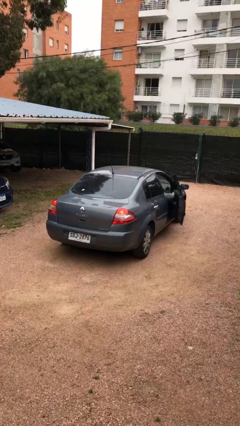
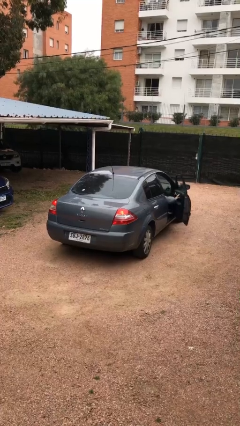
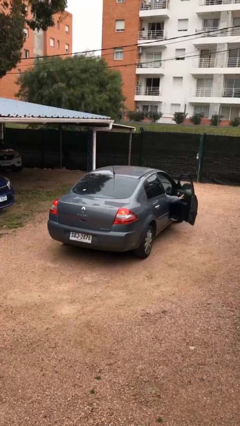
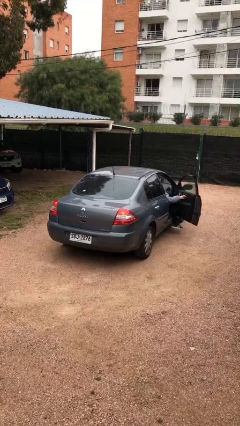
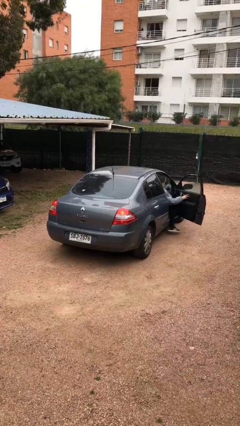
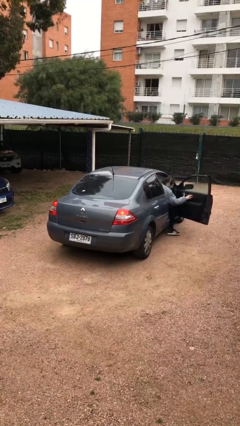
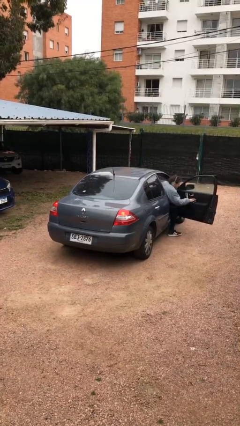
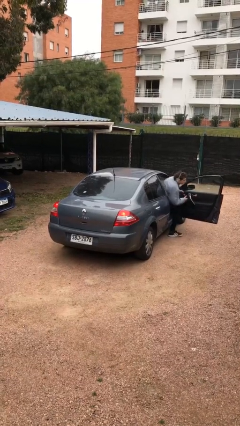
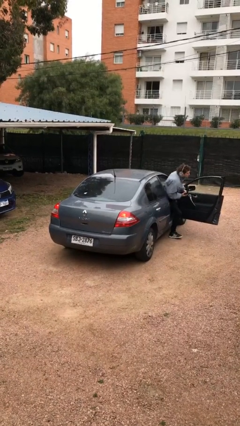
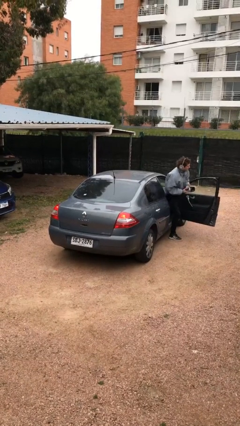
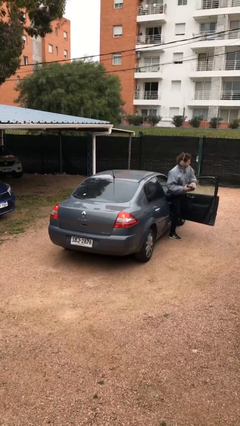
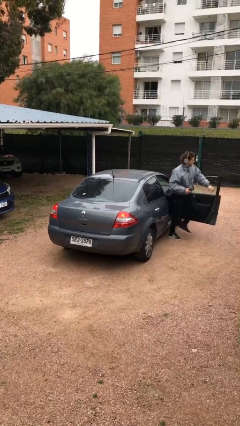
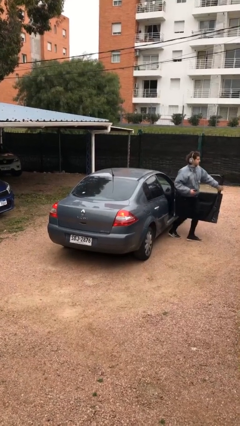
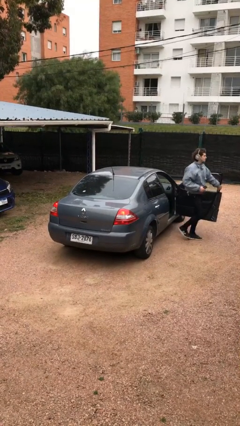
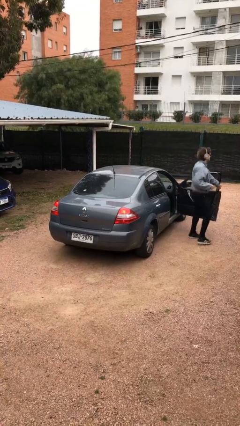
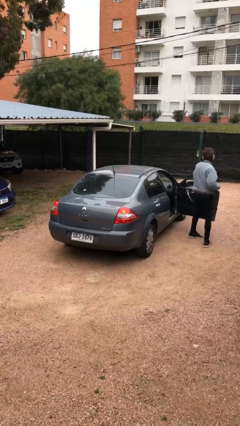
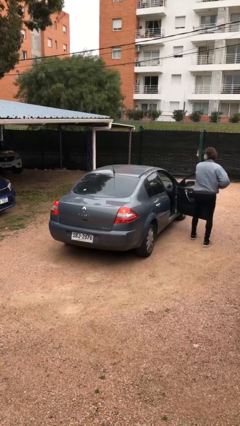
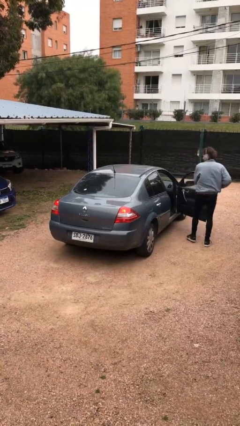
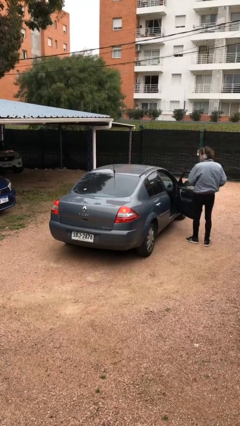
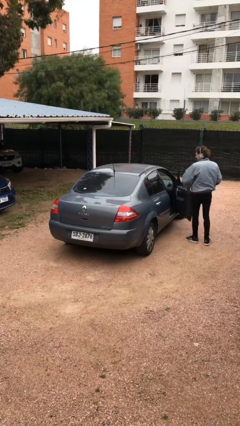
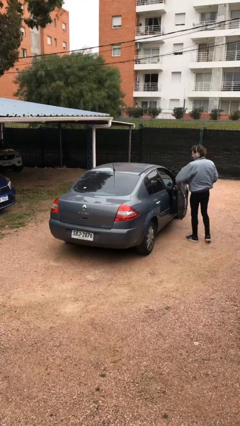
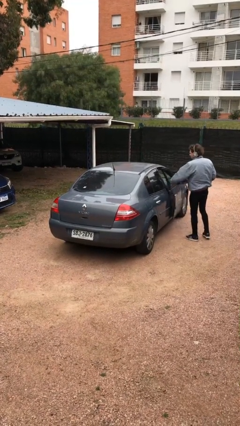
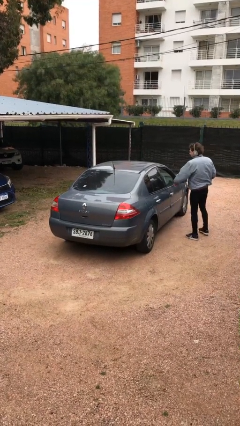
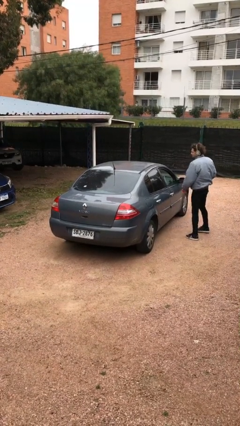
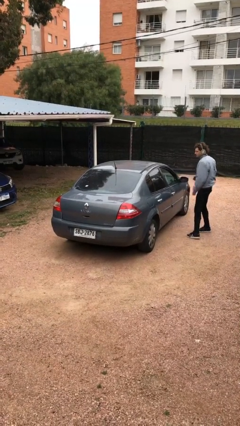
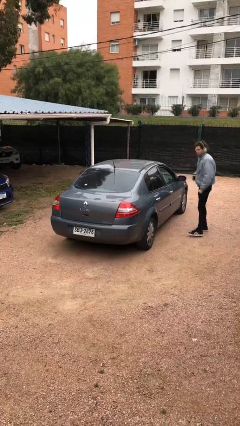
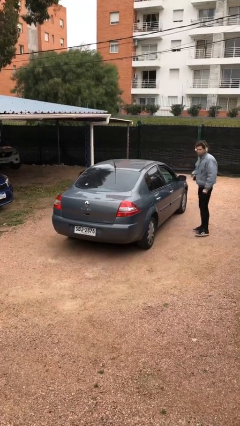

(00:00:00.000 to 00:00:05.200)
car drops off person

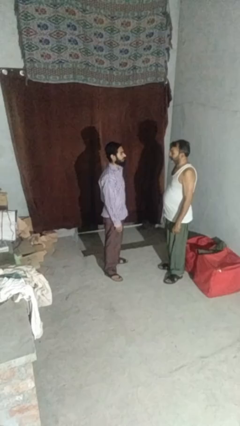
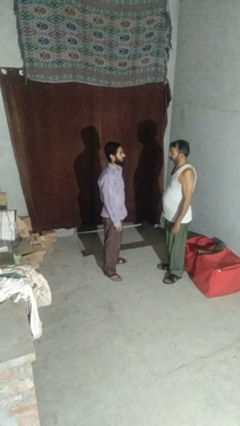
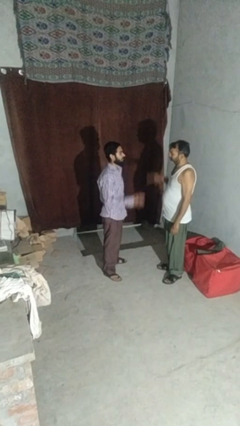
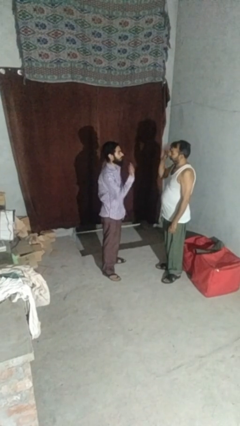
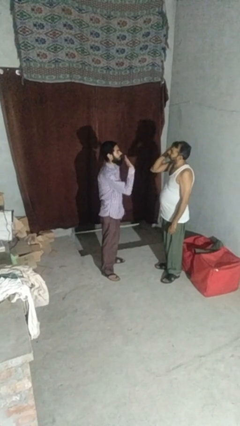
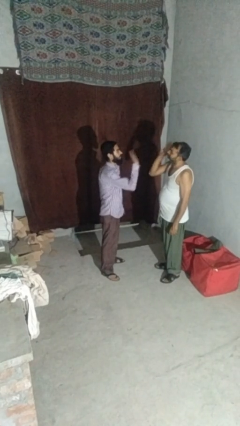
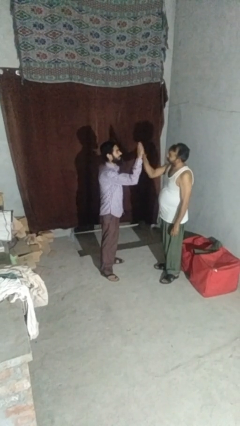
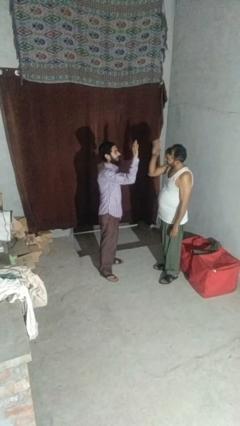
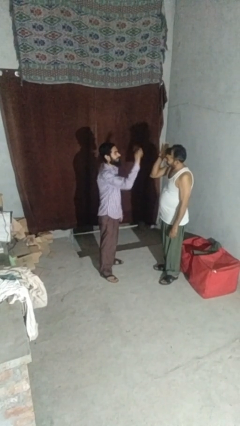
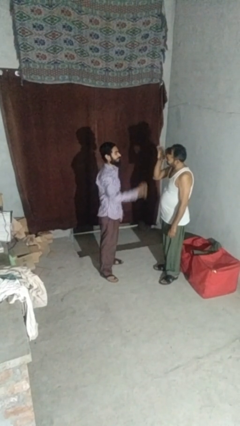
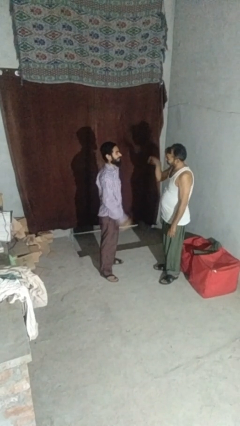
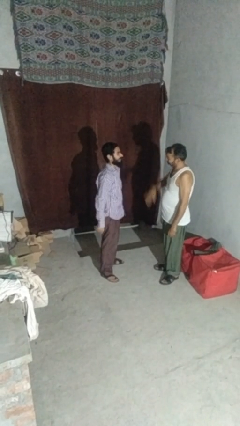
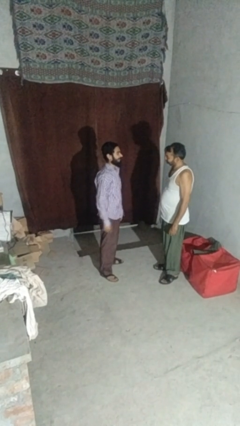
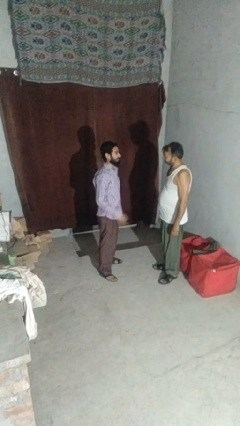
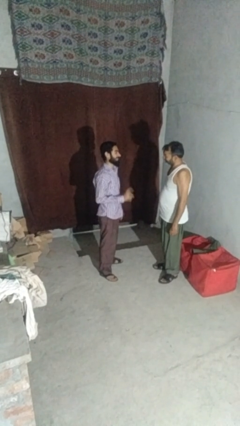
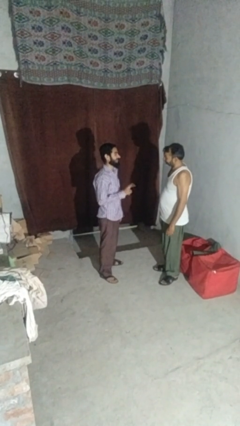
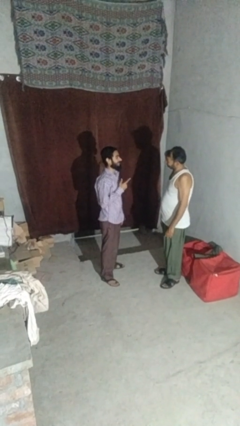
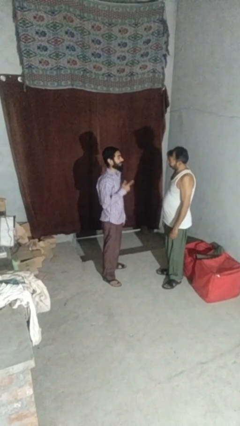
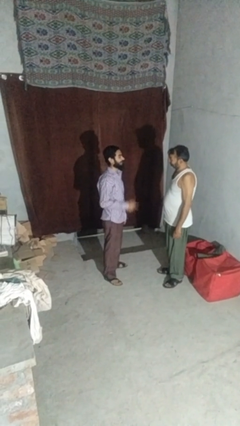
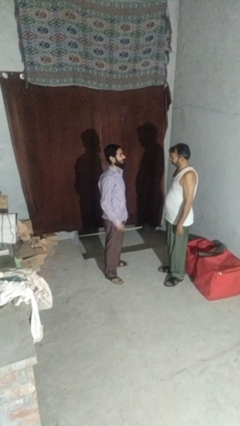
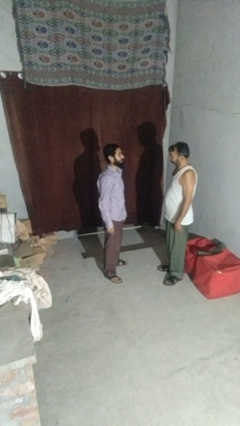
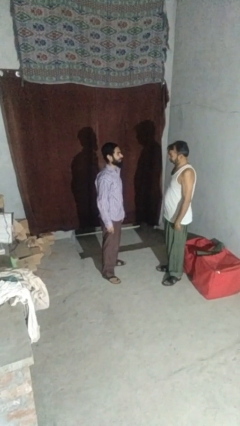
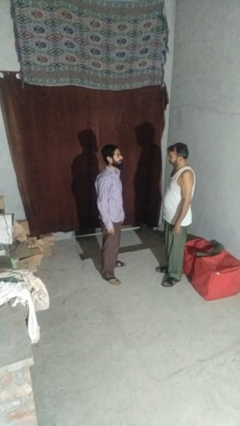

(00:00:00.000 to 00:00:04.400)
person highfives hand

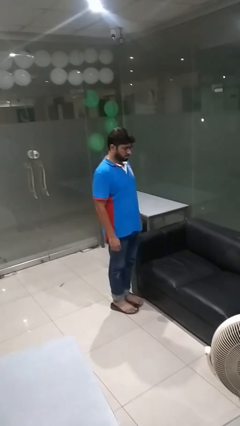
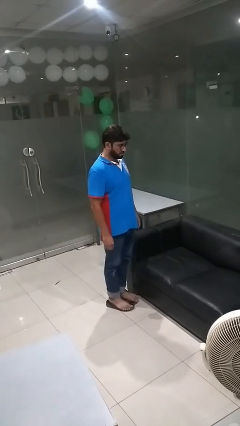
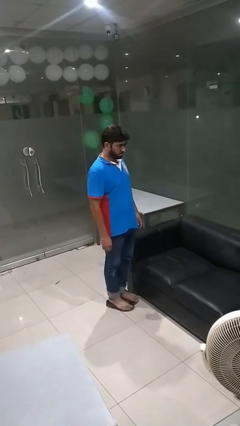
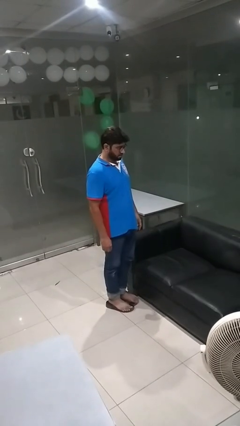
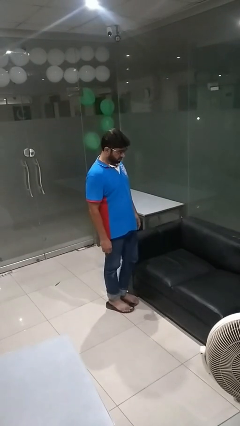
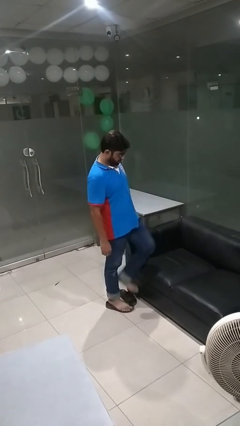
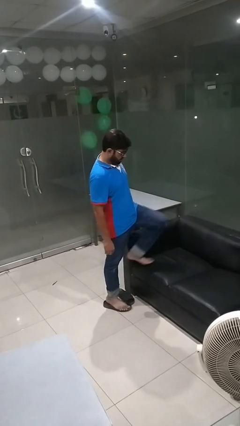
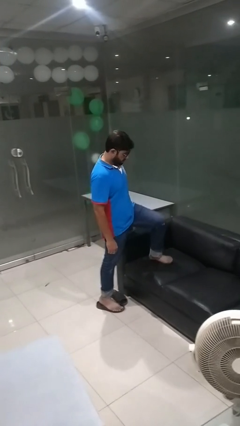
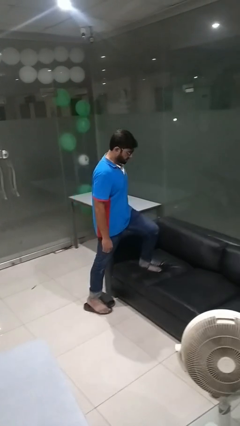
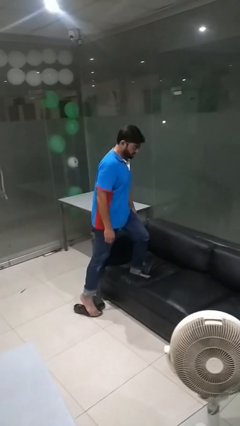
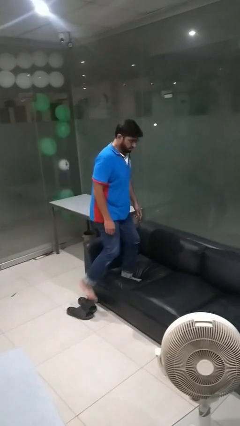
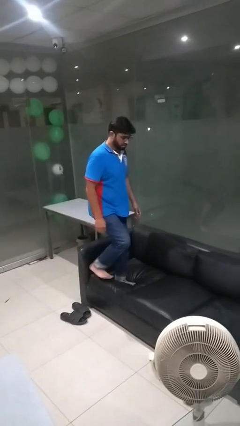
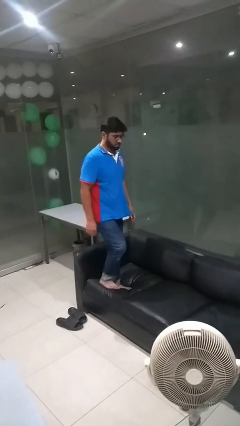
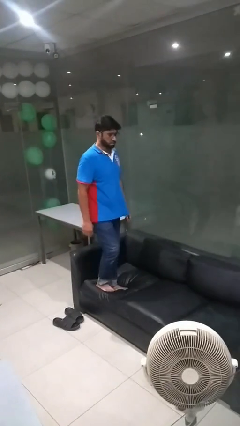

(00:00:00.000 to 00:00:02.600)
person climbs on couch

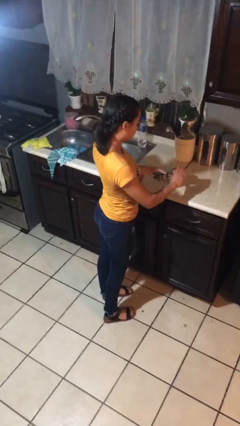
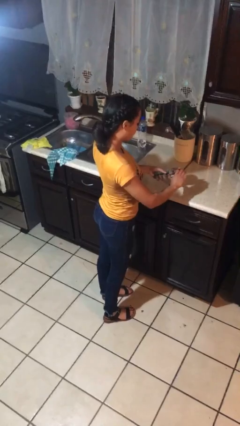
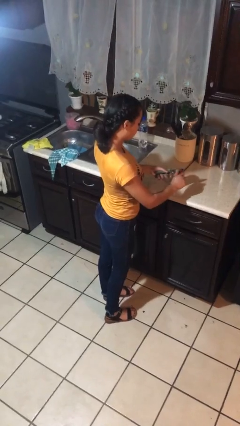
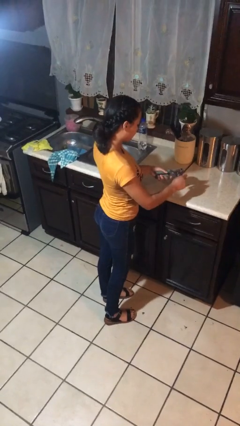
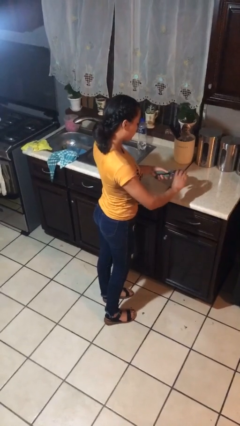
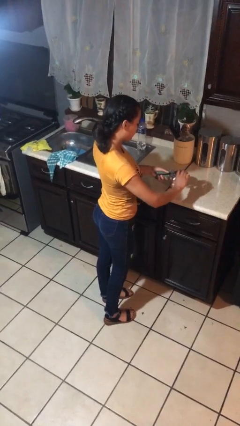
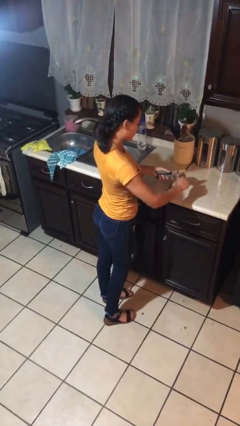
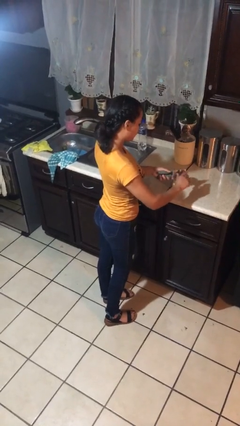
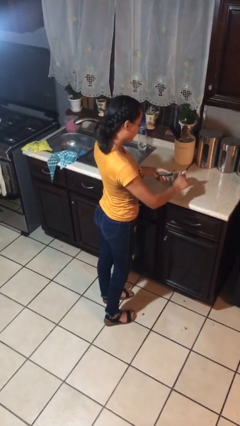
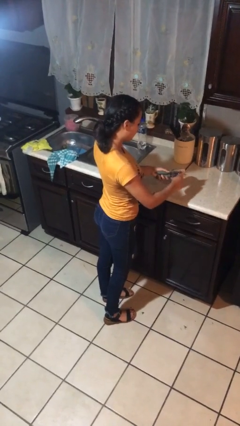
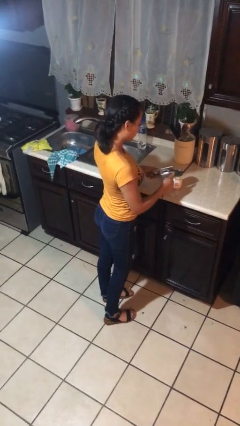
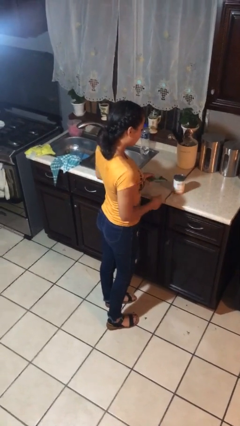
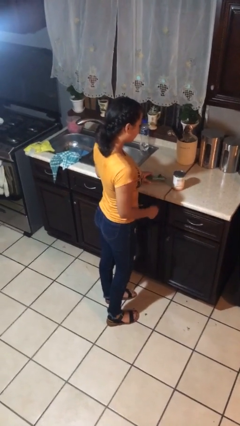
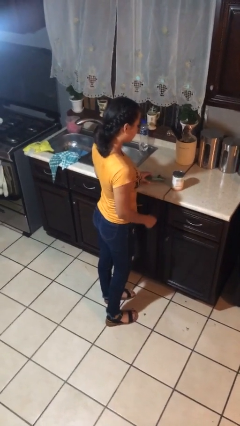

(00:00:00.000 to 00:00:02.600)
person opens can with can opener

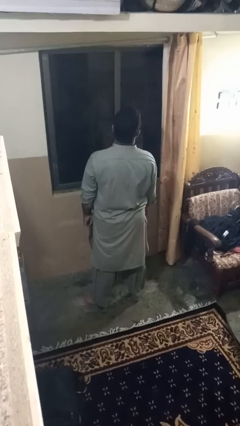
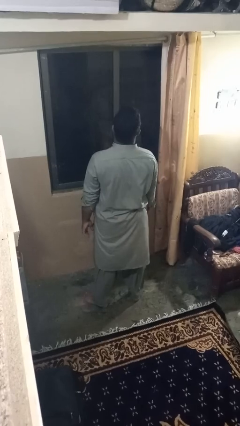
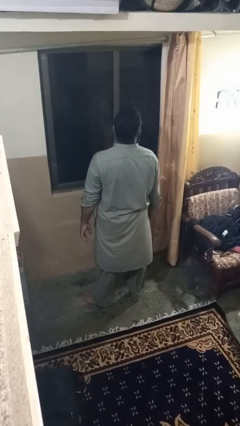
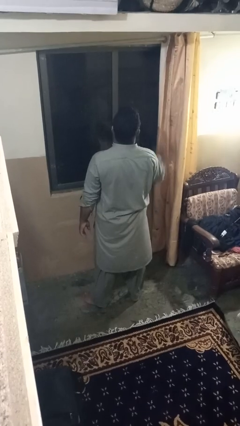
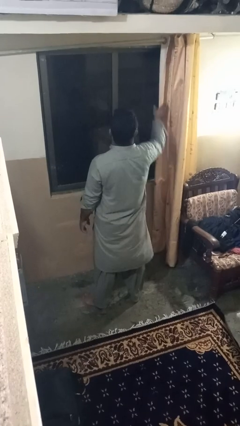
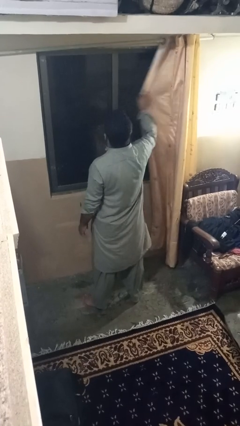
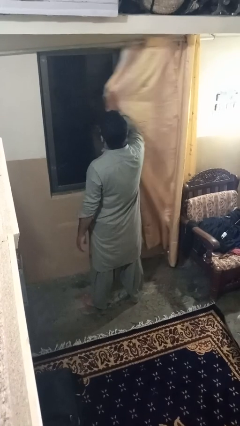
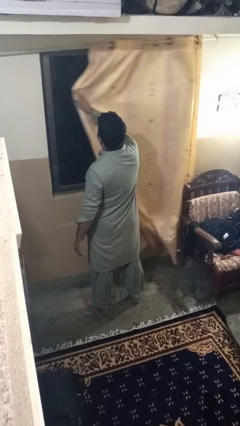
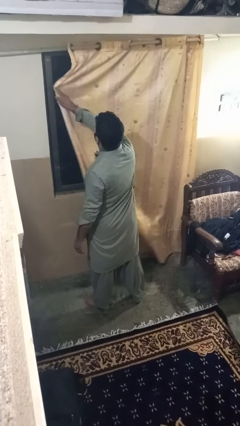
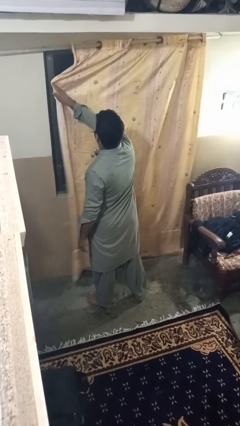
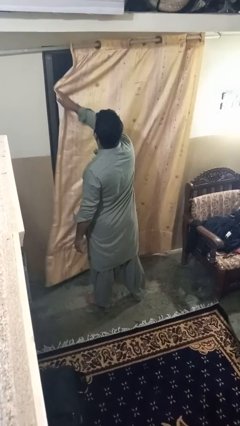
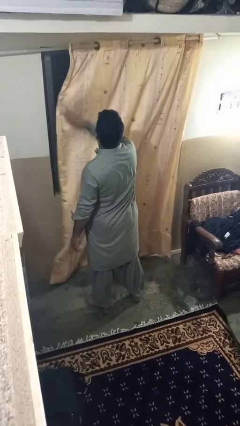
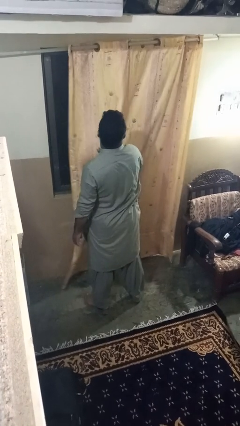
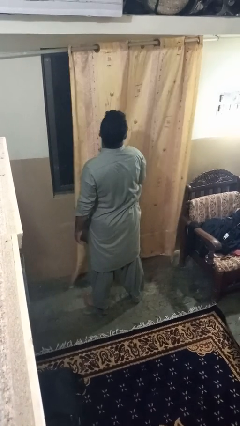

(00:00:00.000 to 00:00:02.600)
person closes curtains

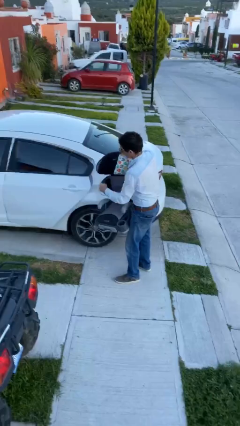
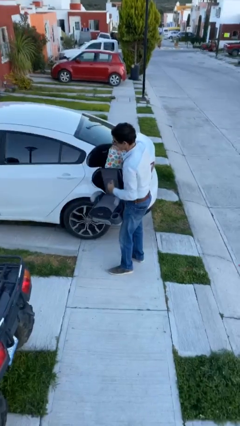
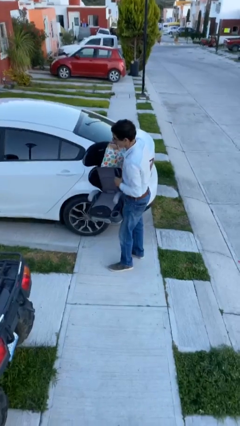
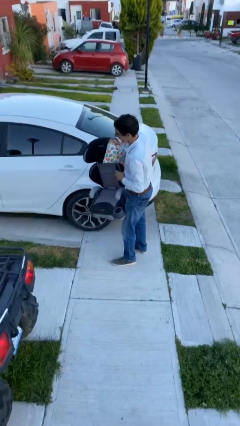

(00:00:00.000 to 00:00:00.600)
person closes car door
